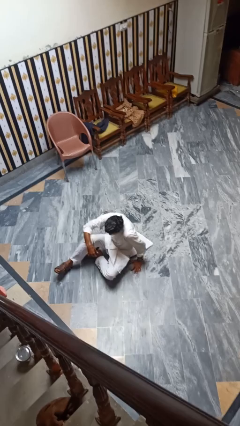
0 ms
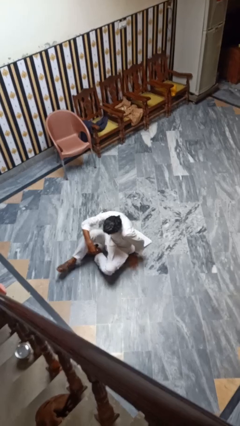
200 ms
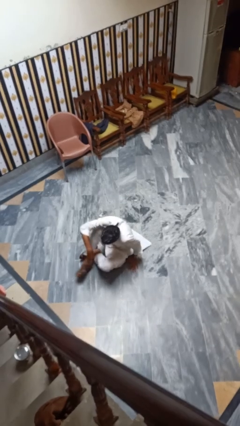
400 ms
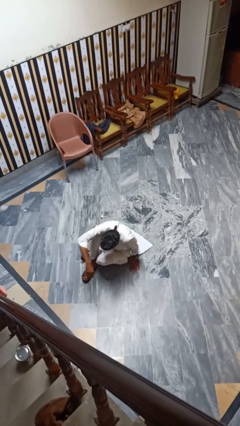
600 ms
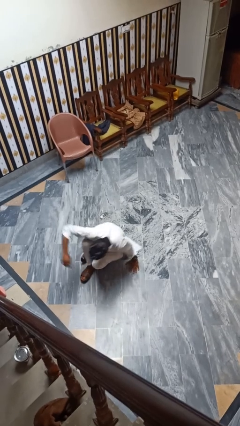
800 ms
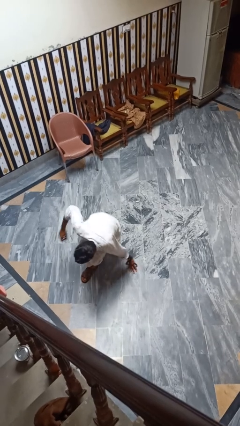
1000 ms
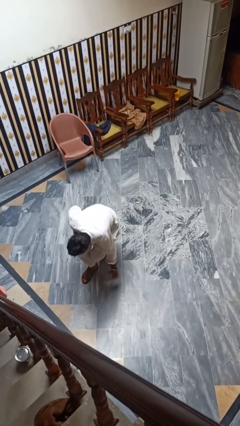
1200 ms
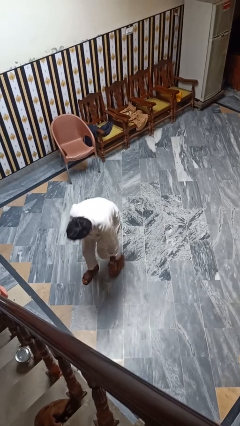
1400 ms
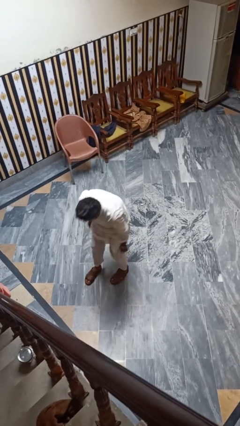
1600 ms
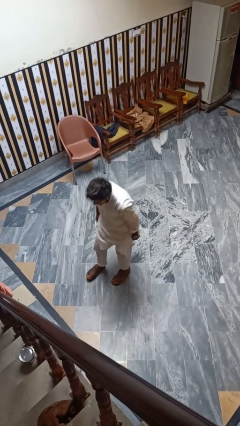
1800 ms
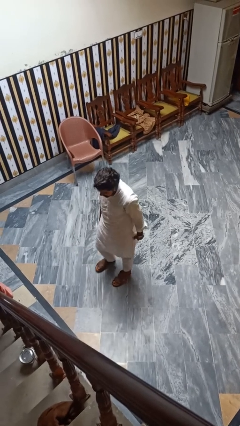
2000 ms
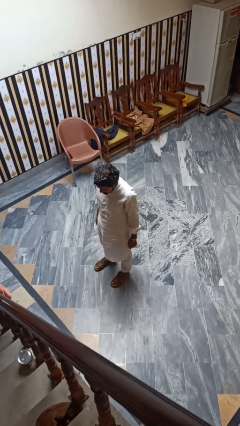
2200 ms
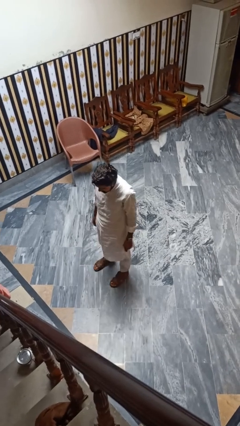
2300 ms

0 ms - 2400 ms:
person stands up from floor

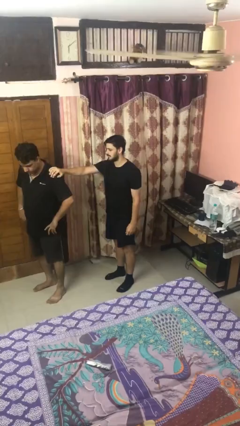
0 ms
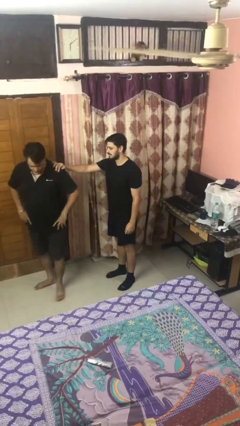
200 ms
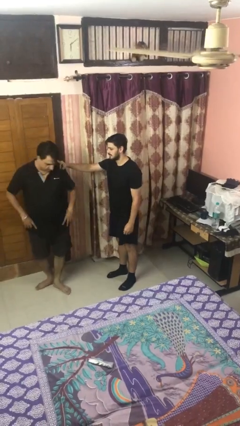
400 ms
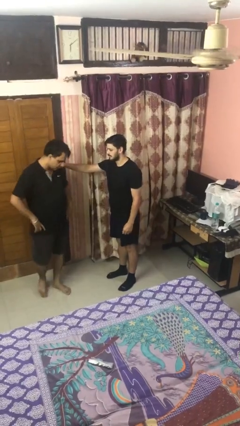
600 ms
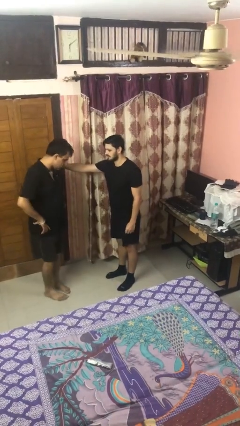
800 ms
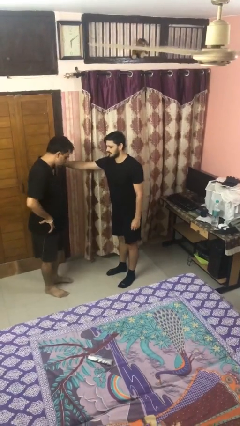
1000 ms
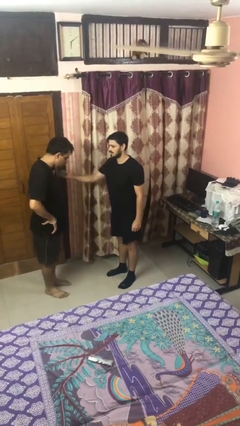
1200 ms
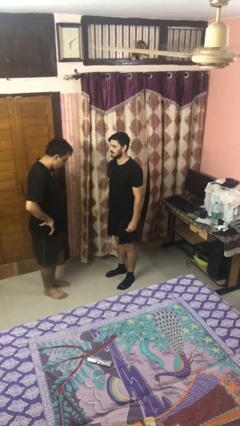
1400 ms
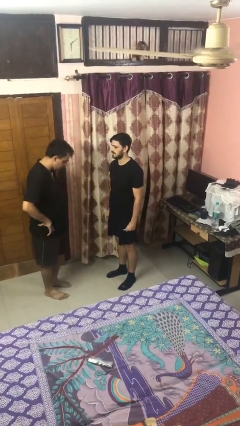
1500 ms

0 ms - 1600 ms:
person spins person around

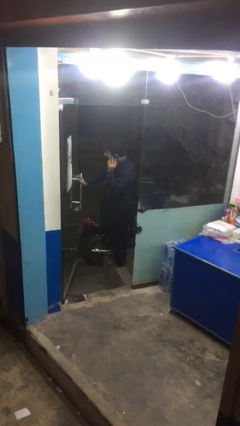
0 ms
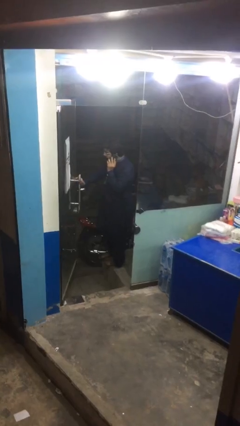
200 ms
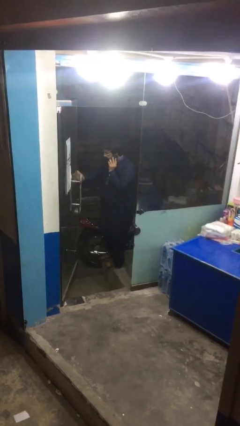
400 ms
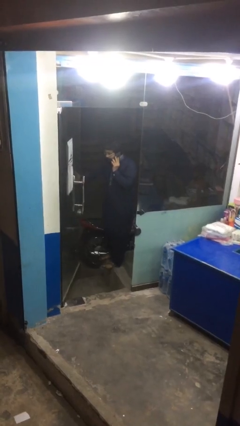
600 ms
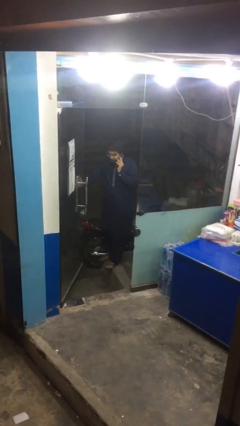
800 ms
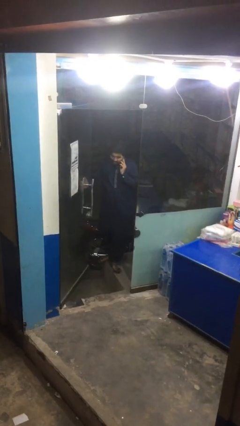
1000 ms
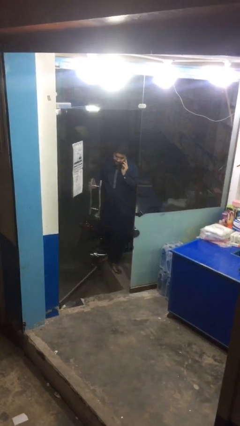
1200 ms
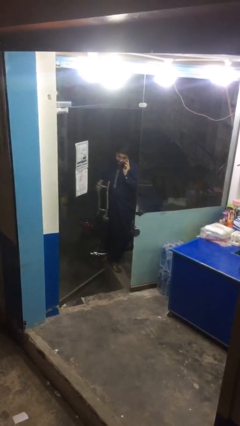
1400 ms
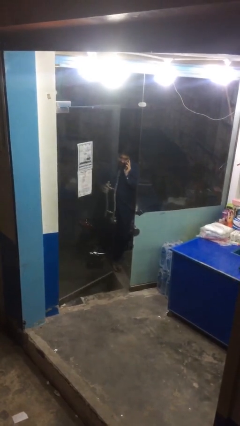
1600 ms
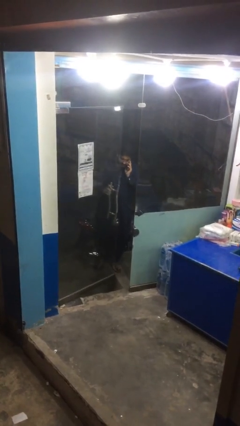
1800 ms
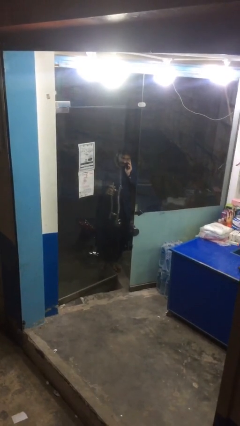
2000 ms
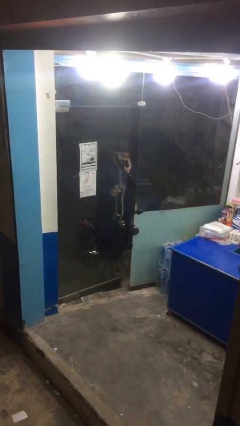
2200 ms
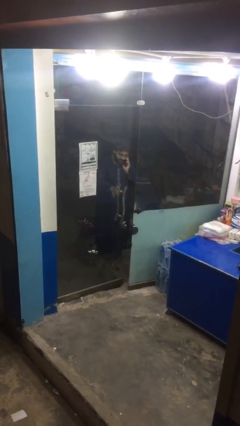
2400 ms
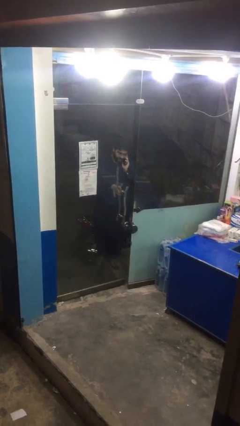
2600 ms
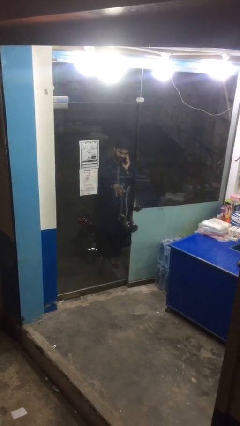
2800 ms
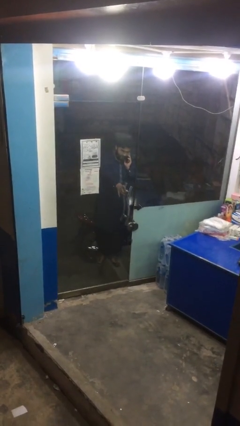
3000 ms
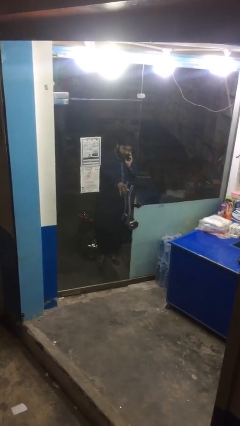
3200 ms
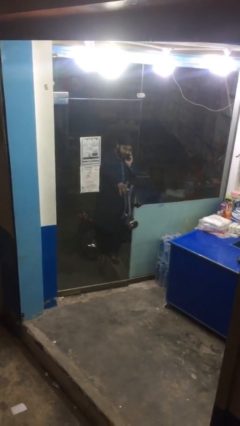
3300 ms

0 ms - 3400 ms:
person closes facility door

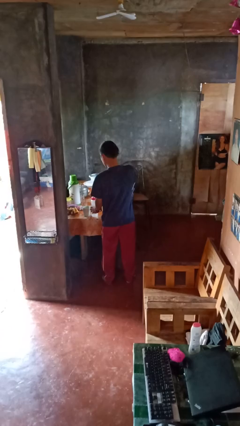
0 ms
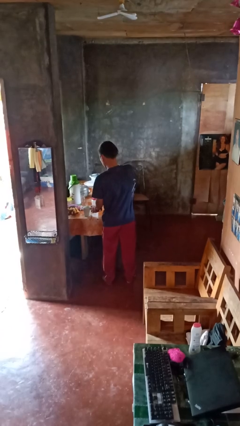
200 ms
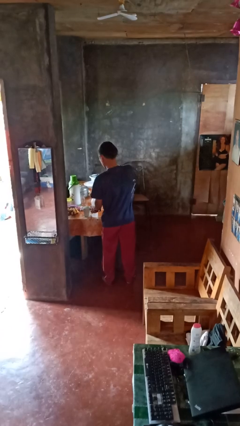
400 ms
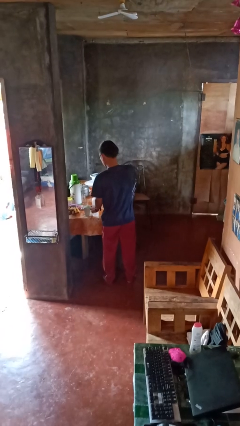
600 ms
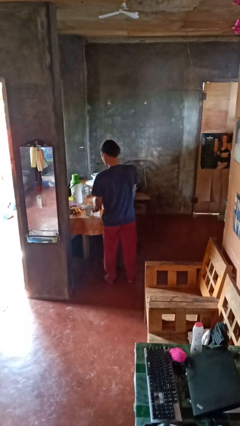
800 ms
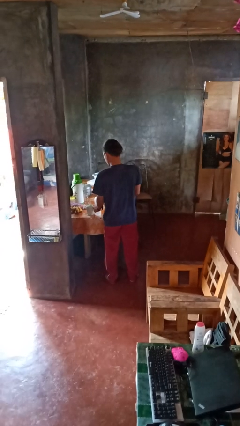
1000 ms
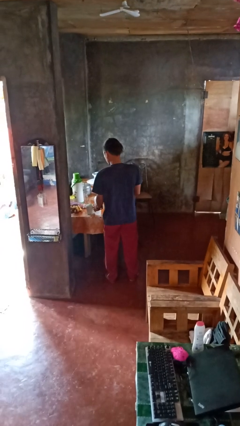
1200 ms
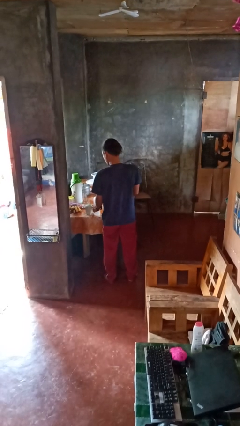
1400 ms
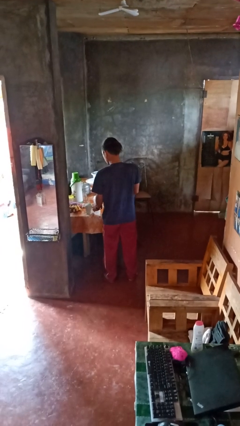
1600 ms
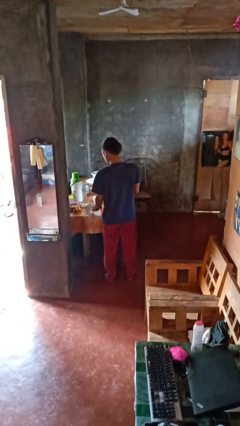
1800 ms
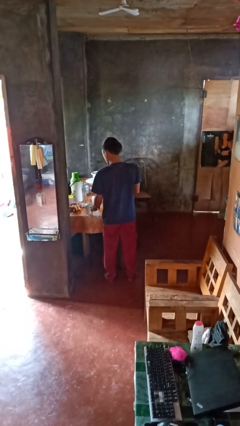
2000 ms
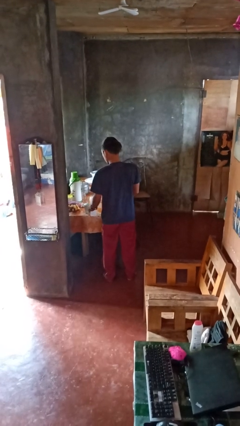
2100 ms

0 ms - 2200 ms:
person unscrews lid from bottle

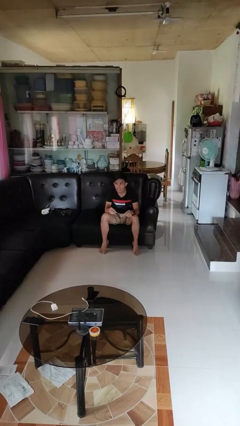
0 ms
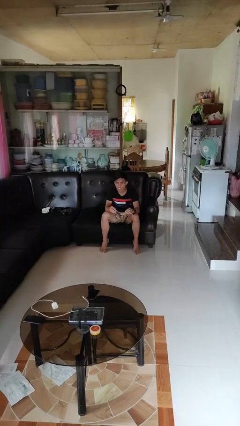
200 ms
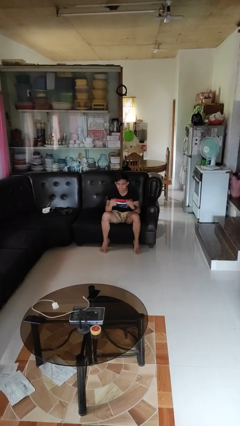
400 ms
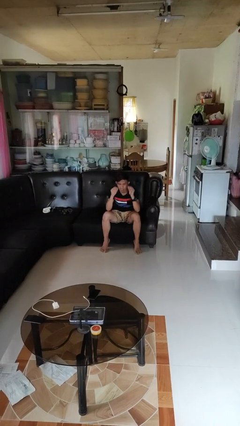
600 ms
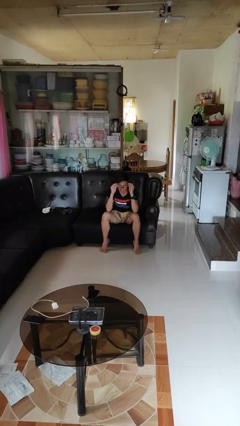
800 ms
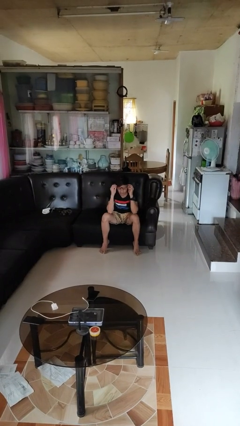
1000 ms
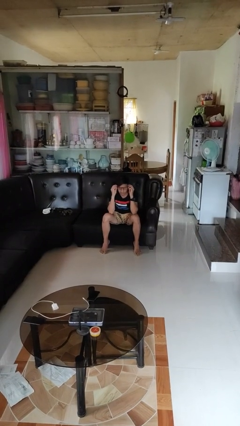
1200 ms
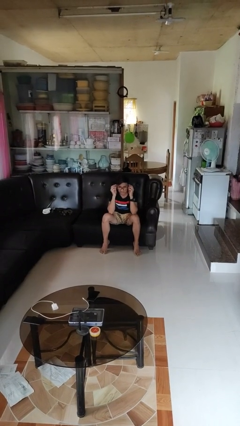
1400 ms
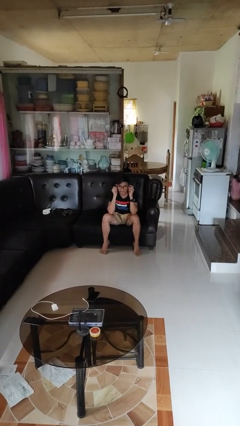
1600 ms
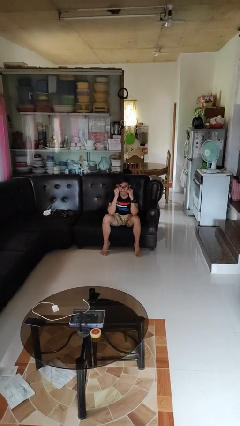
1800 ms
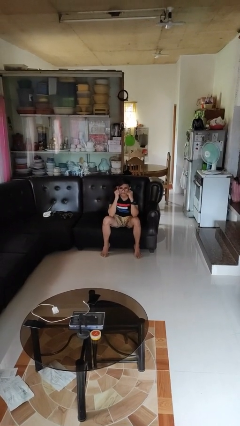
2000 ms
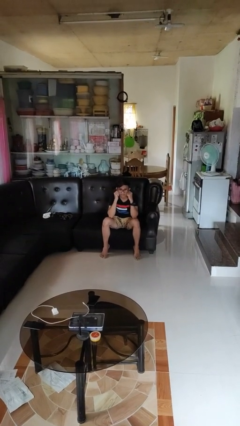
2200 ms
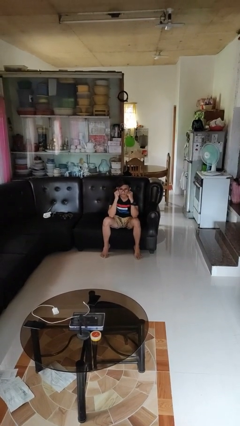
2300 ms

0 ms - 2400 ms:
person puts on glasses

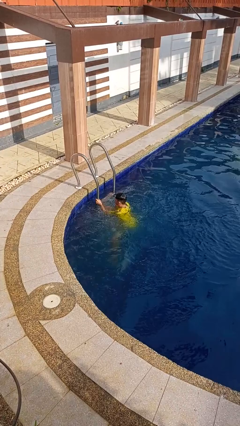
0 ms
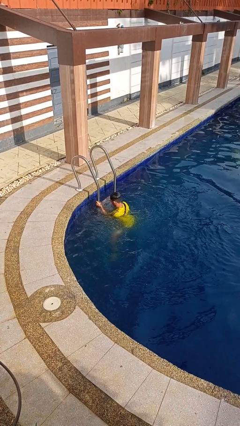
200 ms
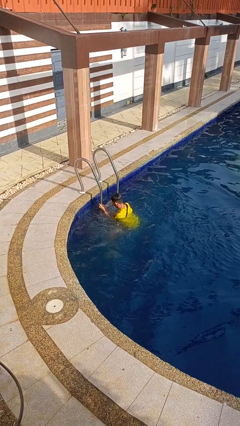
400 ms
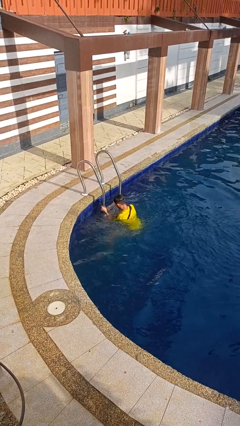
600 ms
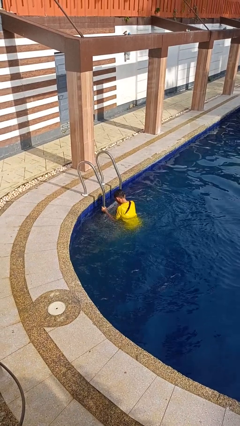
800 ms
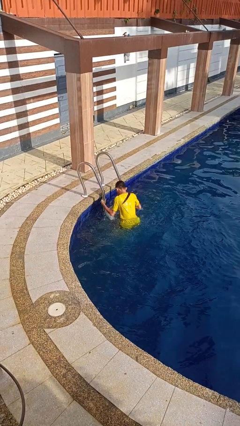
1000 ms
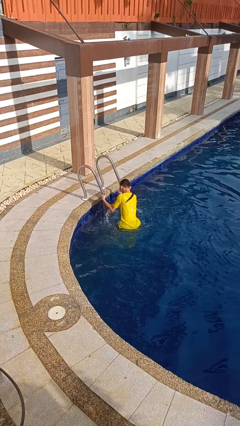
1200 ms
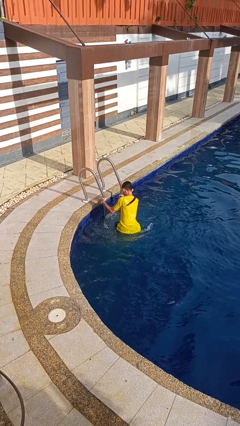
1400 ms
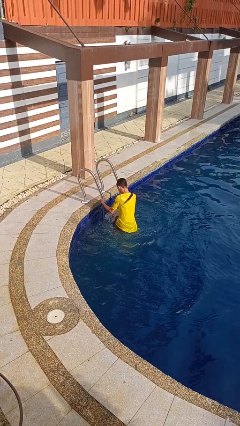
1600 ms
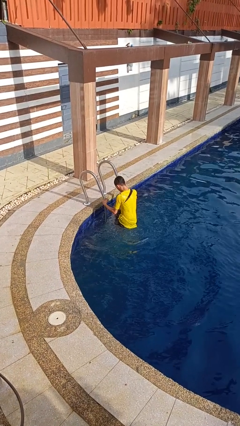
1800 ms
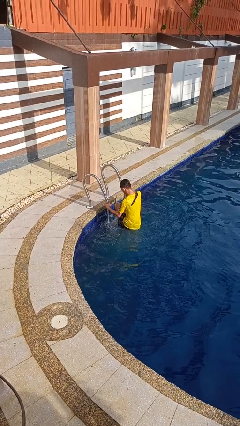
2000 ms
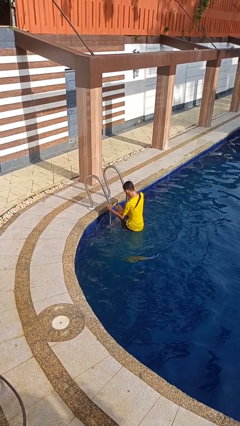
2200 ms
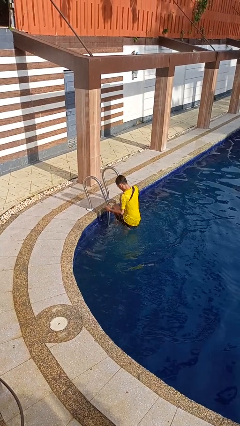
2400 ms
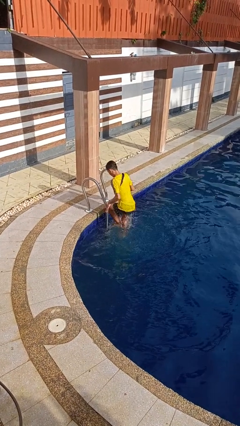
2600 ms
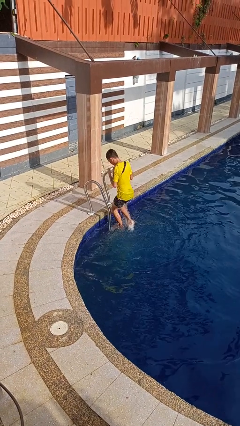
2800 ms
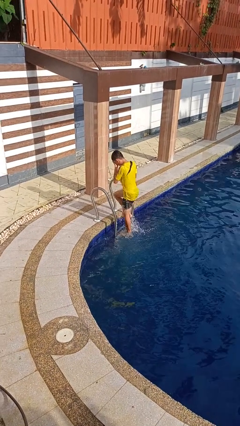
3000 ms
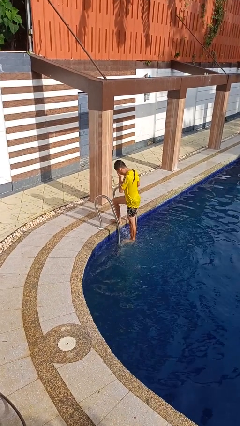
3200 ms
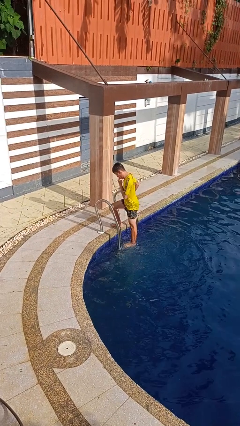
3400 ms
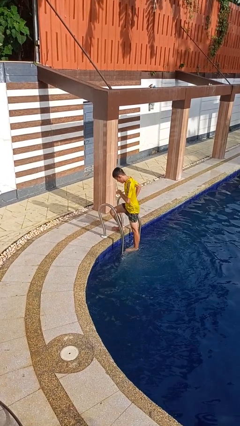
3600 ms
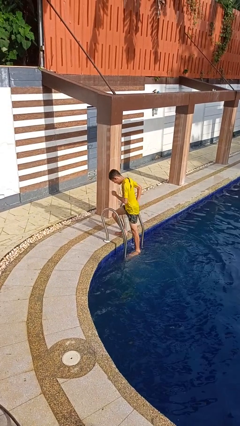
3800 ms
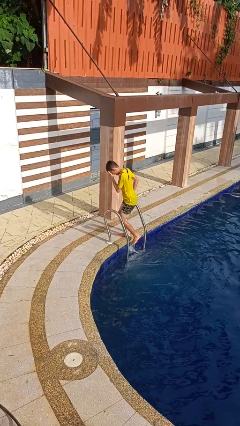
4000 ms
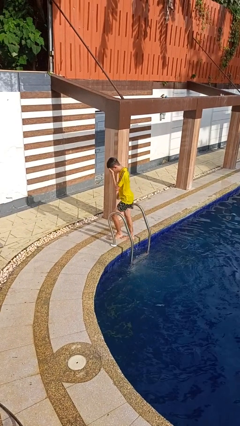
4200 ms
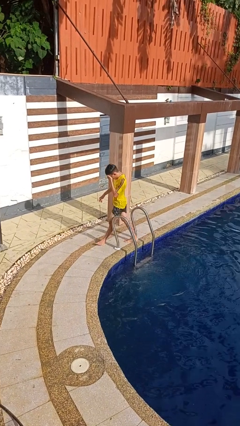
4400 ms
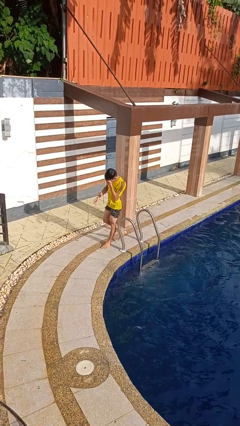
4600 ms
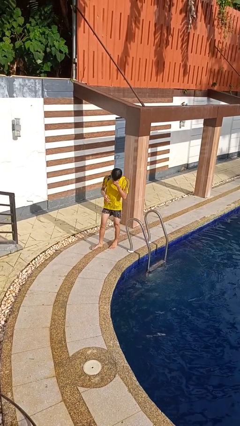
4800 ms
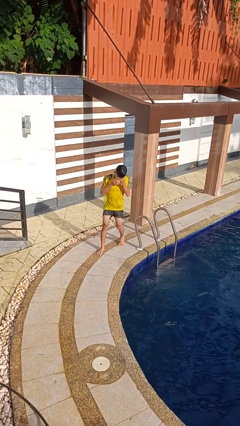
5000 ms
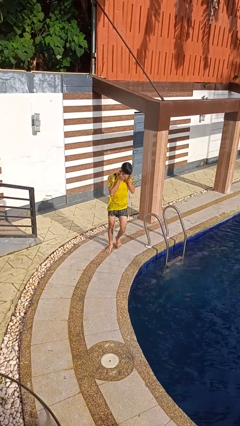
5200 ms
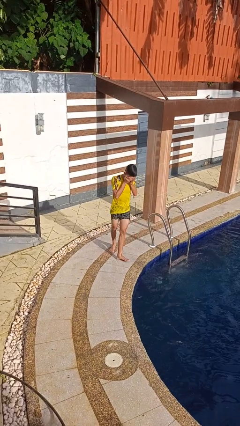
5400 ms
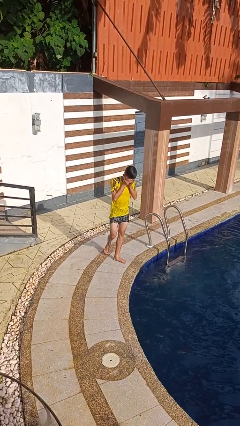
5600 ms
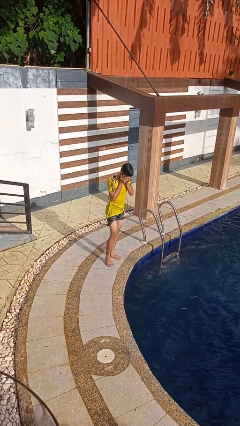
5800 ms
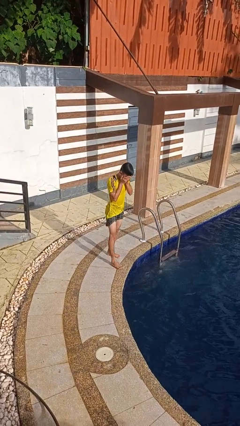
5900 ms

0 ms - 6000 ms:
person exits pool
